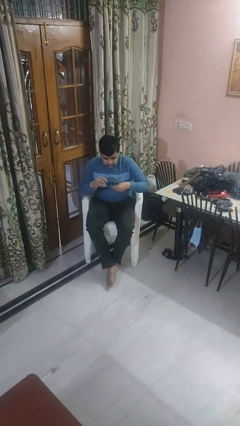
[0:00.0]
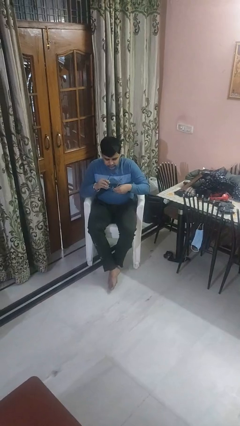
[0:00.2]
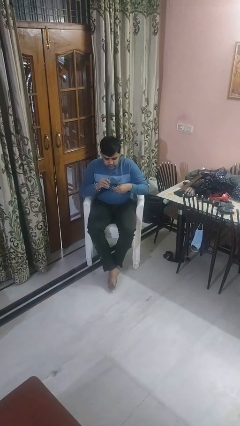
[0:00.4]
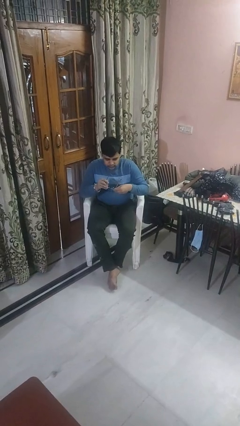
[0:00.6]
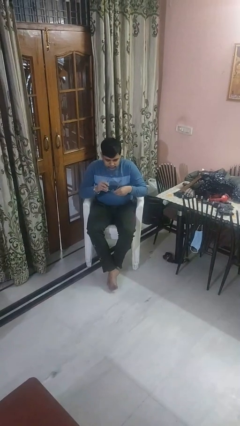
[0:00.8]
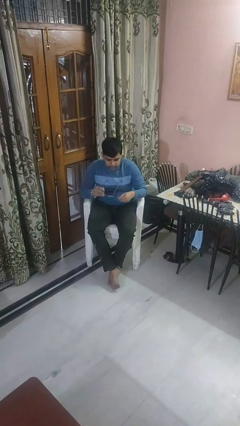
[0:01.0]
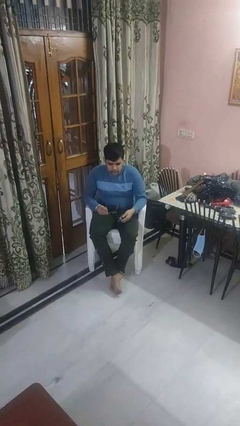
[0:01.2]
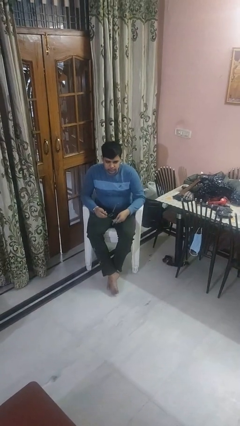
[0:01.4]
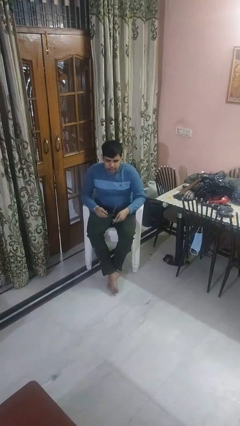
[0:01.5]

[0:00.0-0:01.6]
person cleans eyeglasses

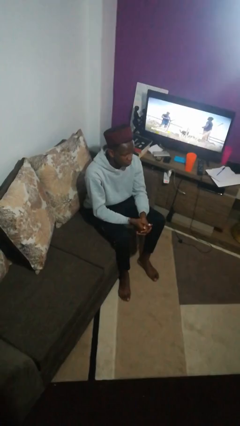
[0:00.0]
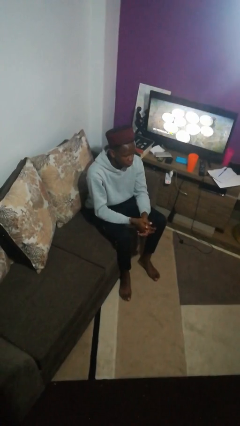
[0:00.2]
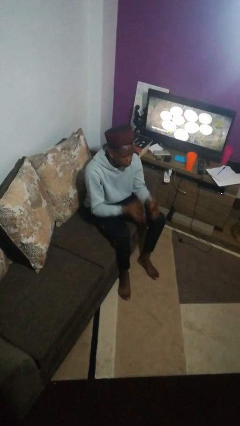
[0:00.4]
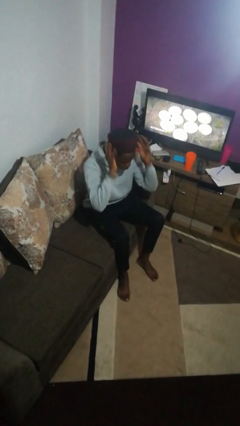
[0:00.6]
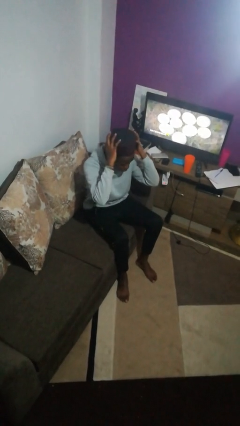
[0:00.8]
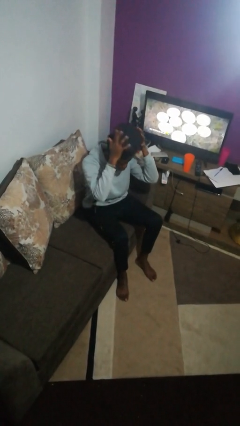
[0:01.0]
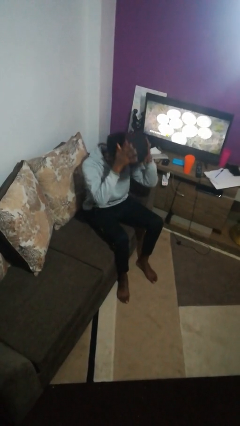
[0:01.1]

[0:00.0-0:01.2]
person takes off hat

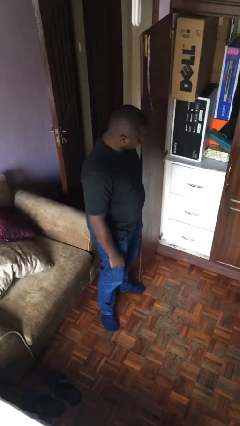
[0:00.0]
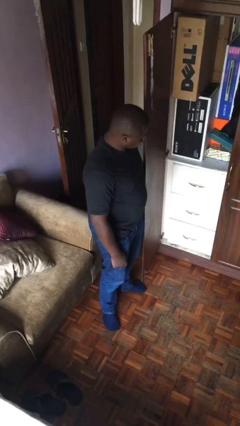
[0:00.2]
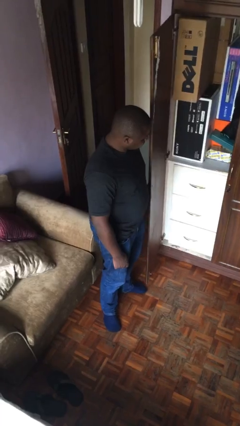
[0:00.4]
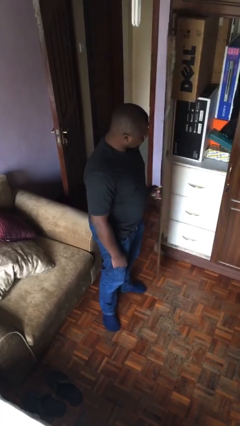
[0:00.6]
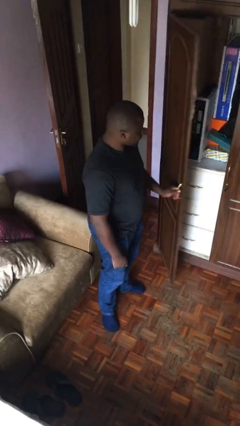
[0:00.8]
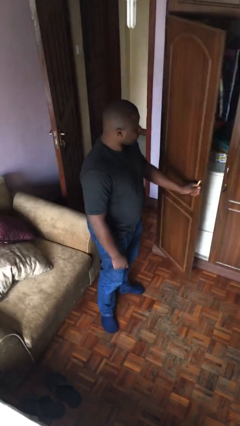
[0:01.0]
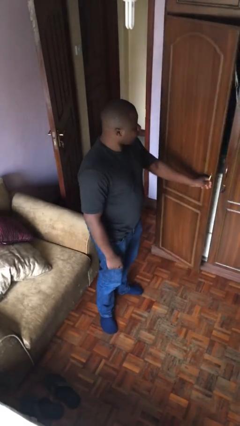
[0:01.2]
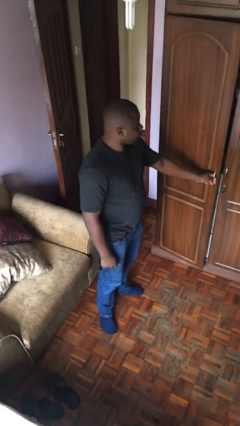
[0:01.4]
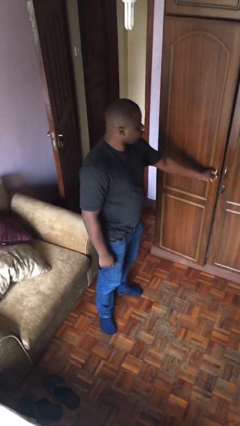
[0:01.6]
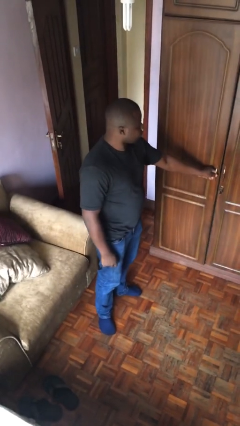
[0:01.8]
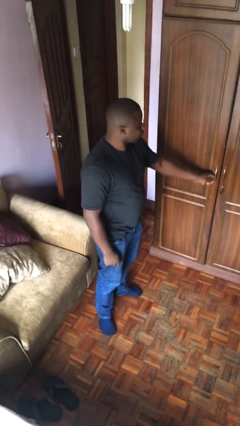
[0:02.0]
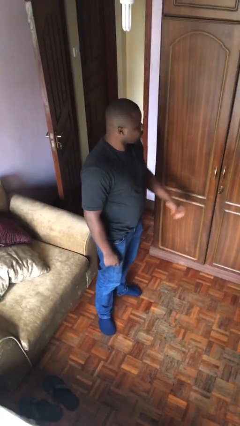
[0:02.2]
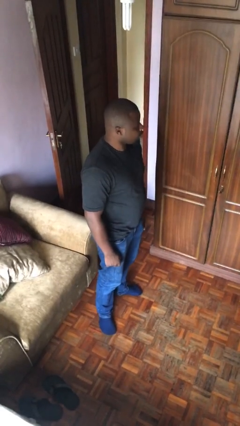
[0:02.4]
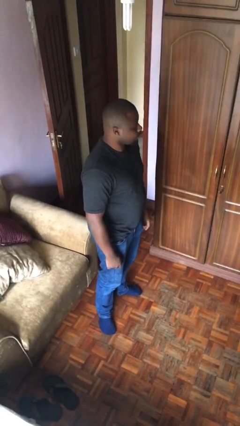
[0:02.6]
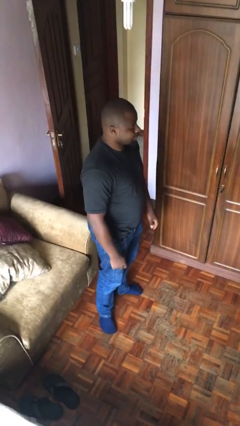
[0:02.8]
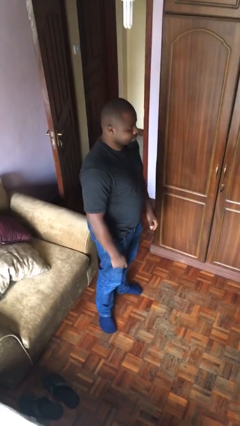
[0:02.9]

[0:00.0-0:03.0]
person closes dresser drawer

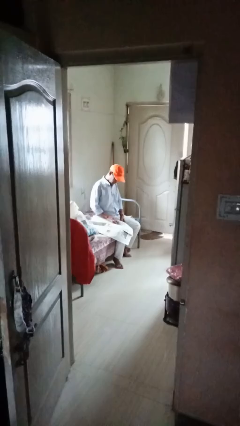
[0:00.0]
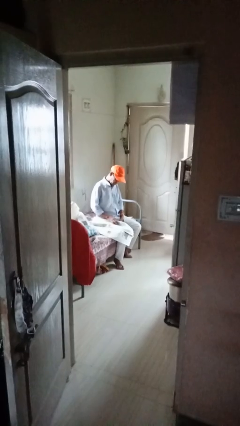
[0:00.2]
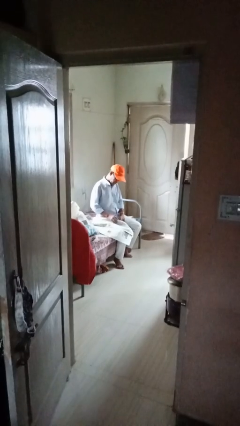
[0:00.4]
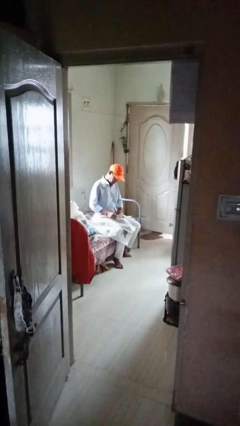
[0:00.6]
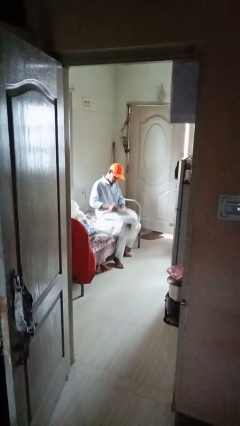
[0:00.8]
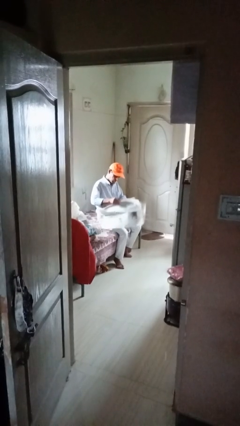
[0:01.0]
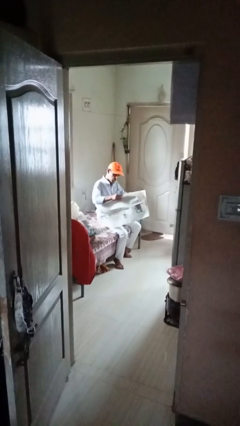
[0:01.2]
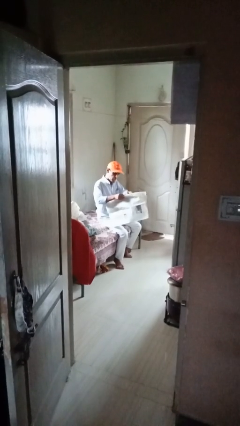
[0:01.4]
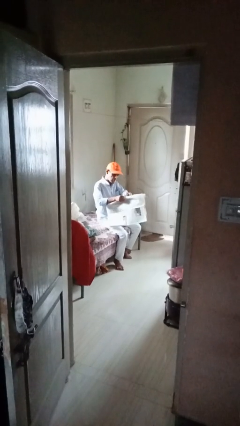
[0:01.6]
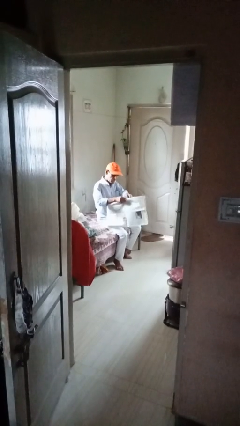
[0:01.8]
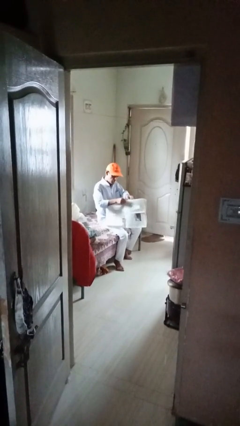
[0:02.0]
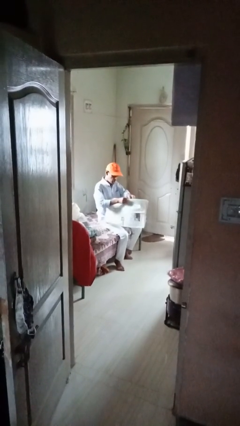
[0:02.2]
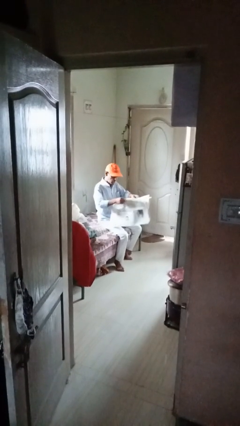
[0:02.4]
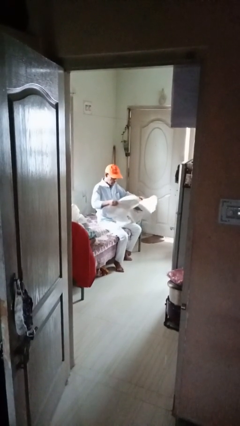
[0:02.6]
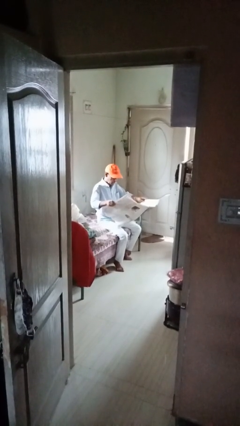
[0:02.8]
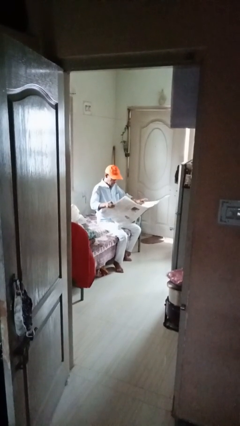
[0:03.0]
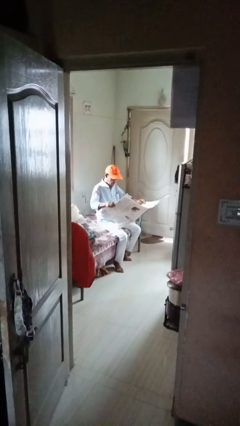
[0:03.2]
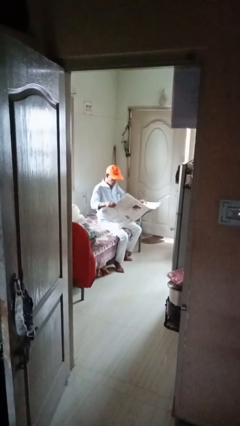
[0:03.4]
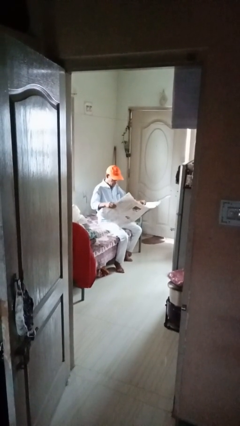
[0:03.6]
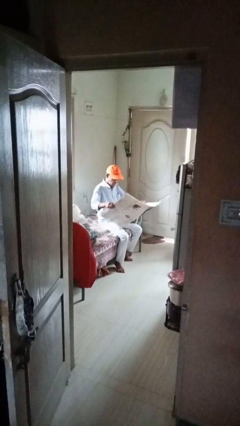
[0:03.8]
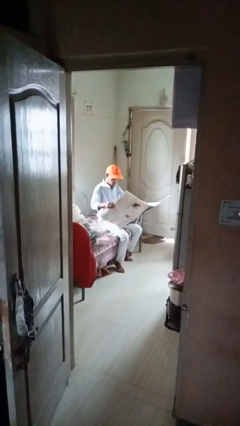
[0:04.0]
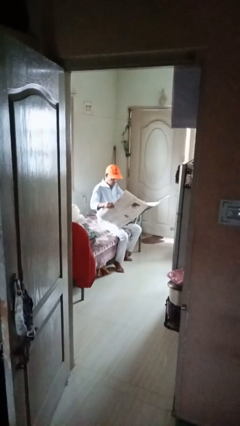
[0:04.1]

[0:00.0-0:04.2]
person reads newspaper

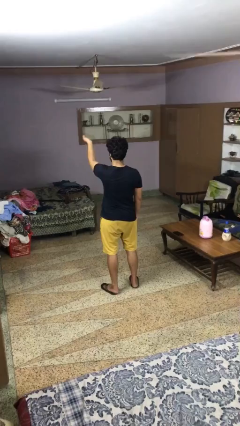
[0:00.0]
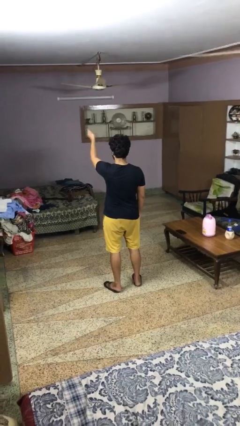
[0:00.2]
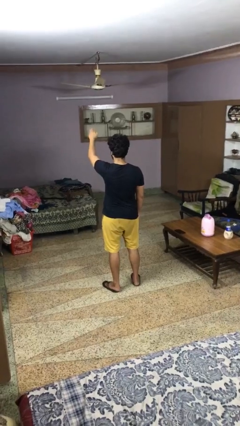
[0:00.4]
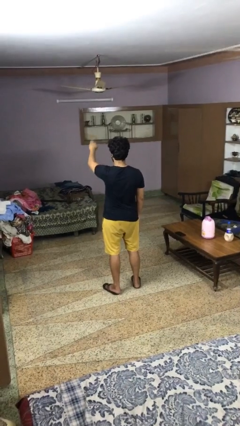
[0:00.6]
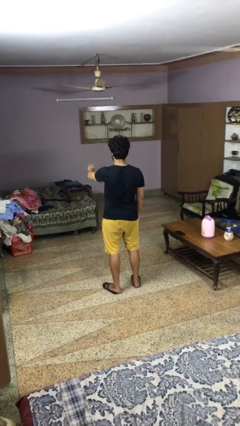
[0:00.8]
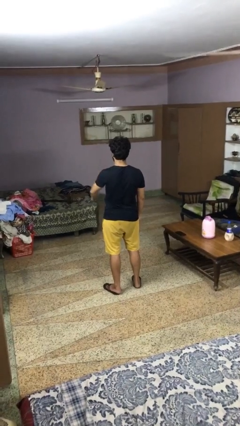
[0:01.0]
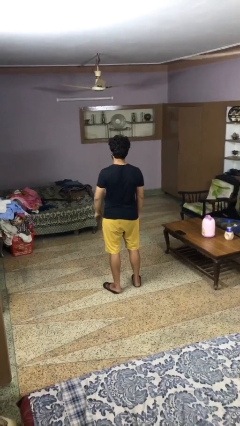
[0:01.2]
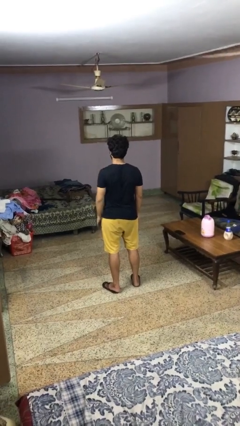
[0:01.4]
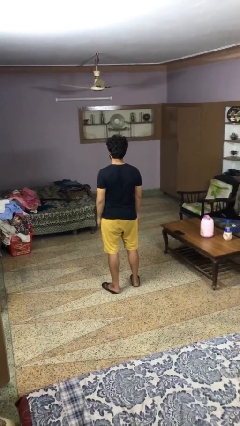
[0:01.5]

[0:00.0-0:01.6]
person gestures swipe down

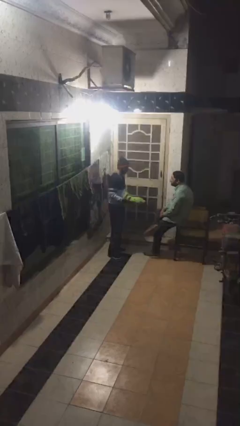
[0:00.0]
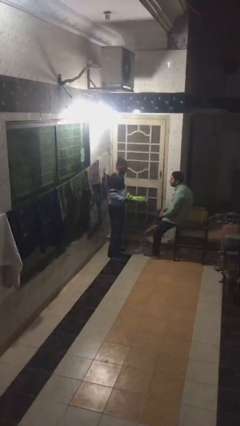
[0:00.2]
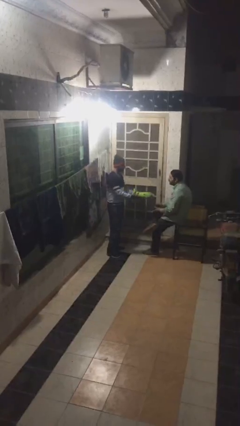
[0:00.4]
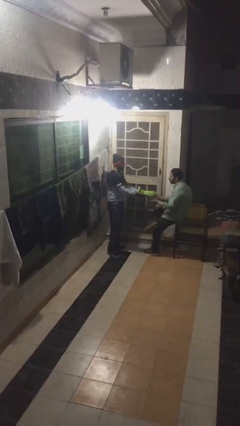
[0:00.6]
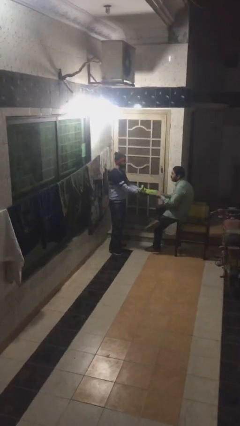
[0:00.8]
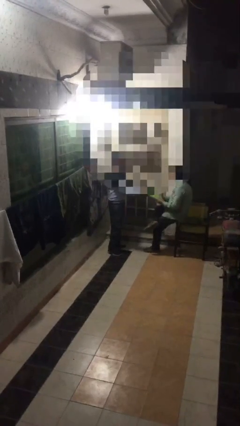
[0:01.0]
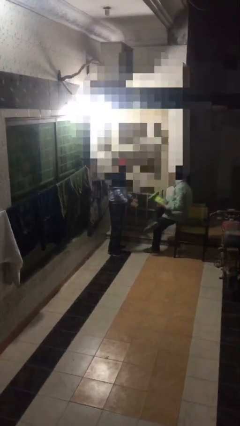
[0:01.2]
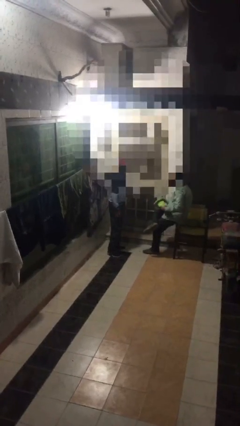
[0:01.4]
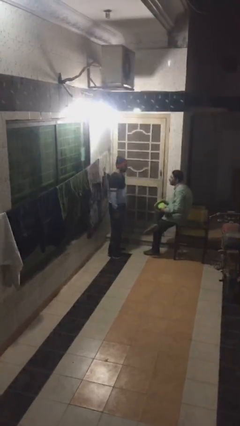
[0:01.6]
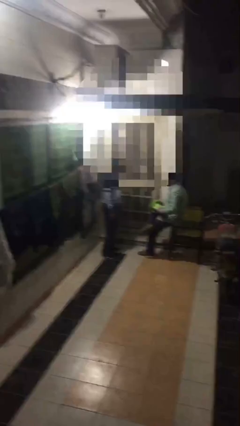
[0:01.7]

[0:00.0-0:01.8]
person transfers object to person

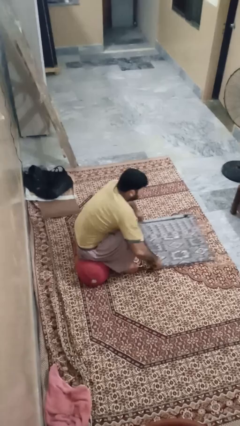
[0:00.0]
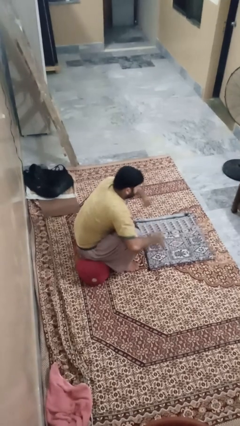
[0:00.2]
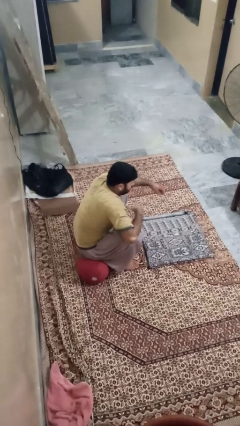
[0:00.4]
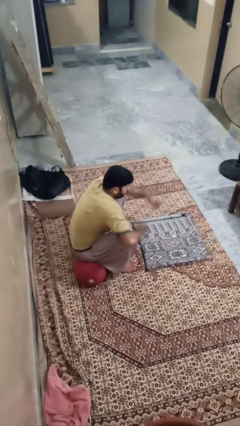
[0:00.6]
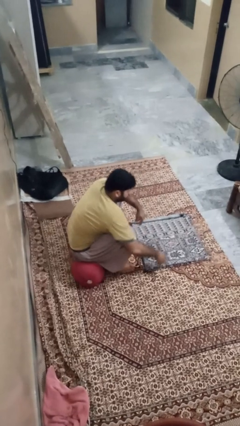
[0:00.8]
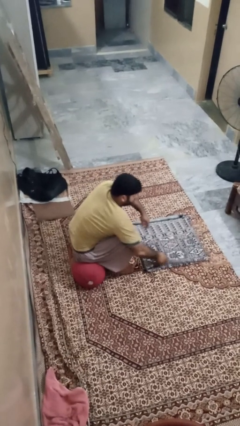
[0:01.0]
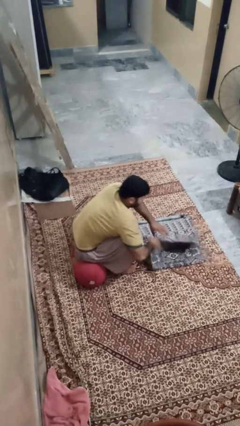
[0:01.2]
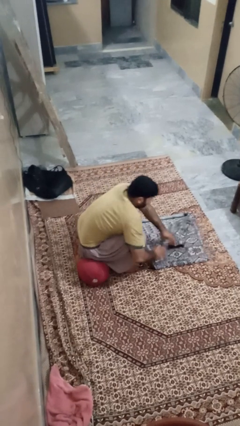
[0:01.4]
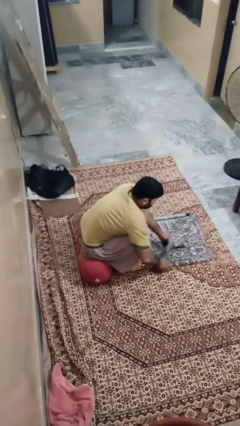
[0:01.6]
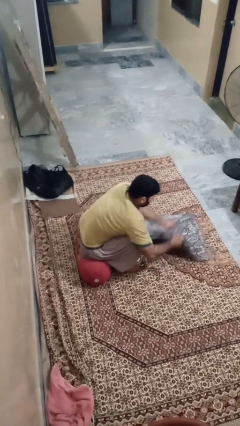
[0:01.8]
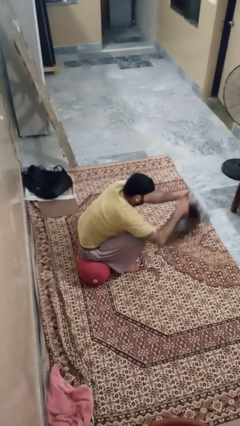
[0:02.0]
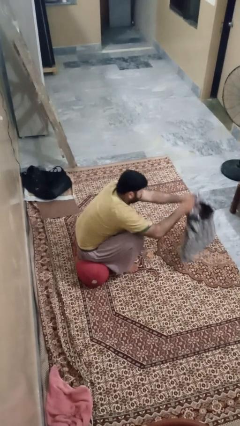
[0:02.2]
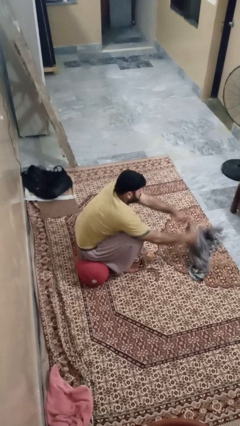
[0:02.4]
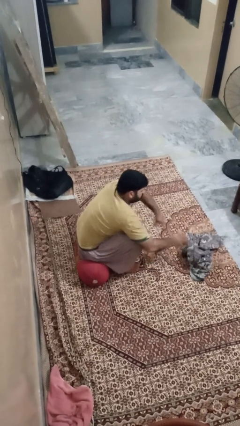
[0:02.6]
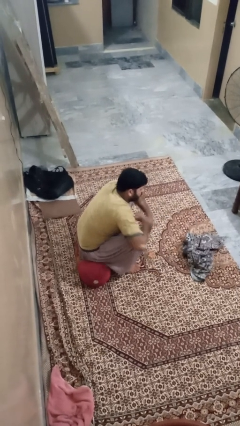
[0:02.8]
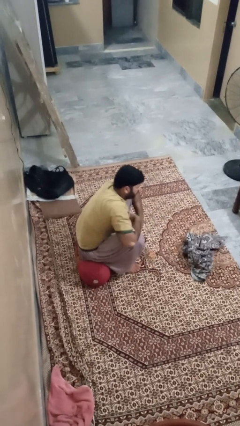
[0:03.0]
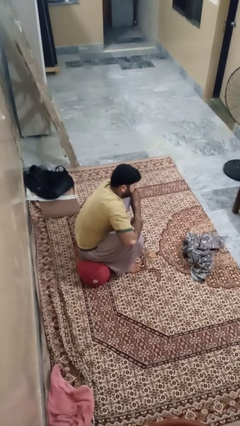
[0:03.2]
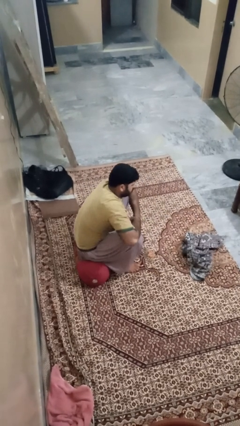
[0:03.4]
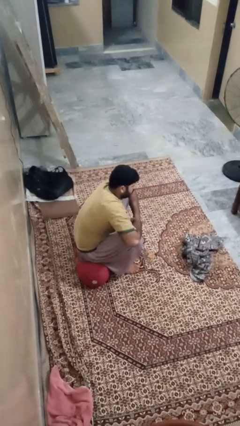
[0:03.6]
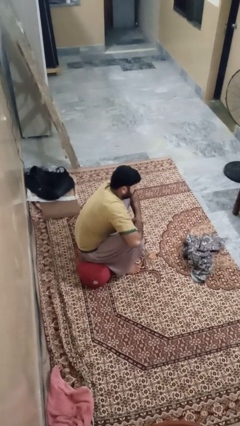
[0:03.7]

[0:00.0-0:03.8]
person unfolds blanket
